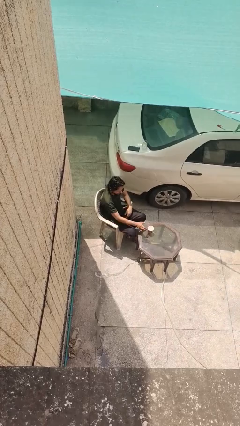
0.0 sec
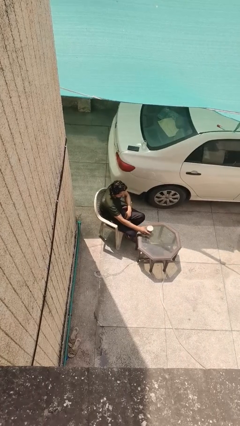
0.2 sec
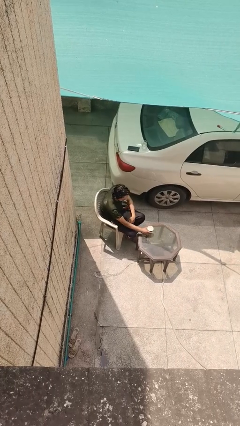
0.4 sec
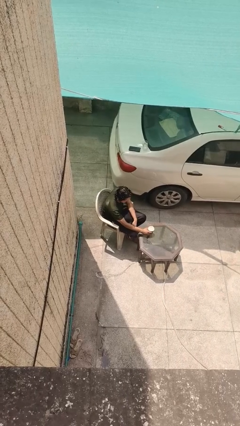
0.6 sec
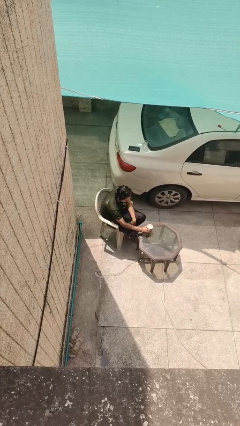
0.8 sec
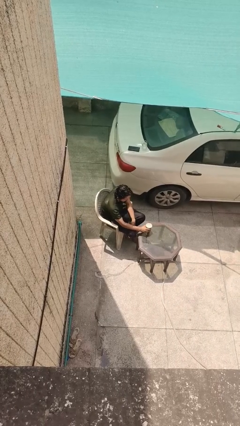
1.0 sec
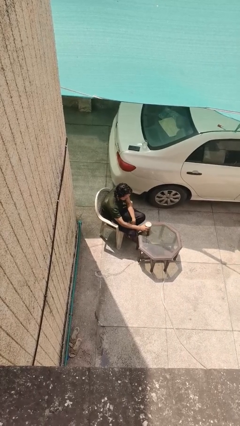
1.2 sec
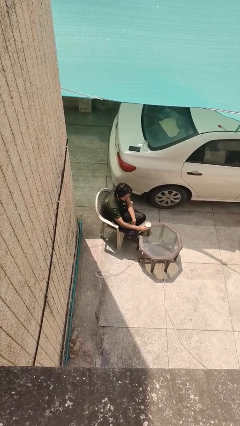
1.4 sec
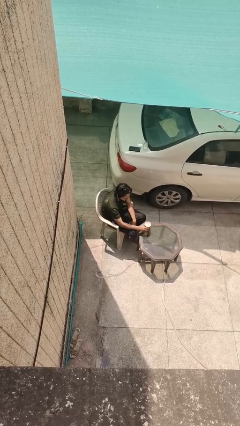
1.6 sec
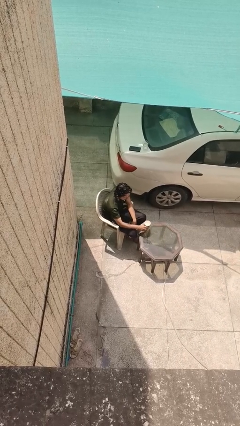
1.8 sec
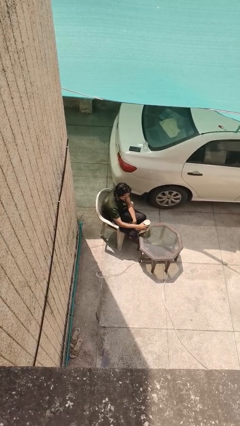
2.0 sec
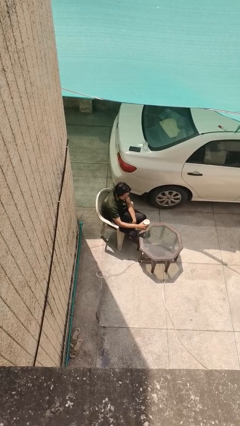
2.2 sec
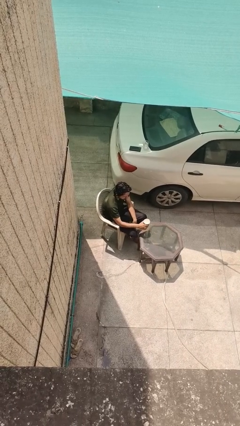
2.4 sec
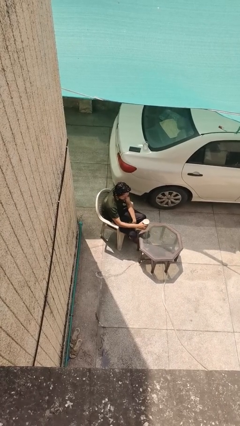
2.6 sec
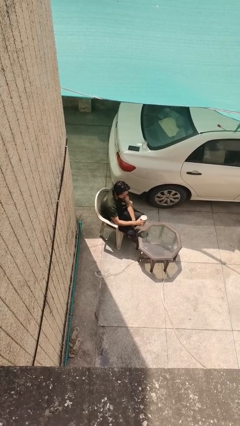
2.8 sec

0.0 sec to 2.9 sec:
person picks up object from table

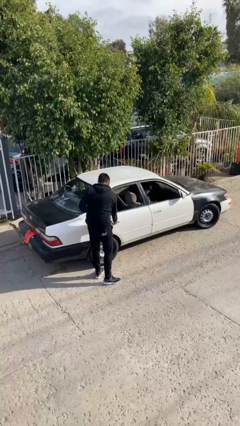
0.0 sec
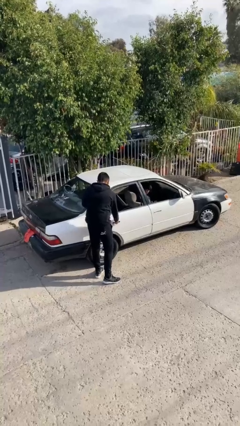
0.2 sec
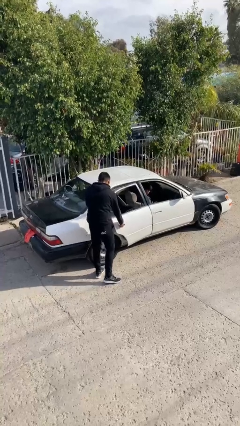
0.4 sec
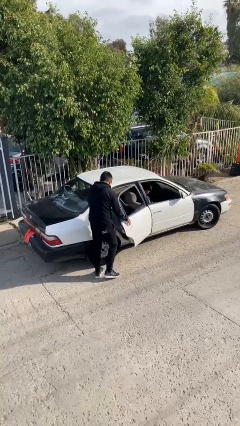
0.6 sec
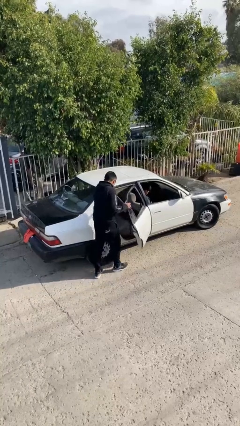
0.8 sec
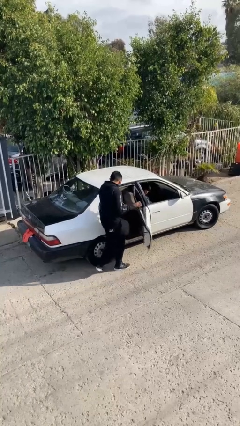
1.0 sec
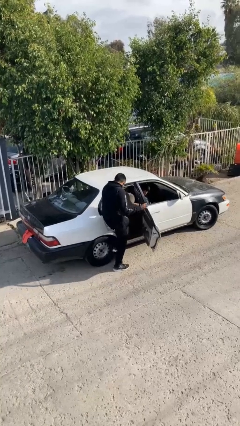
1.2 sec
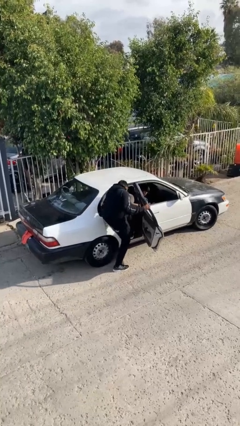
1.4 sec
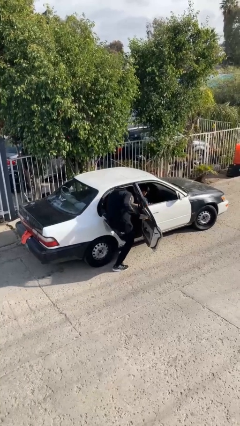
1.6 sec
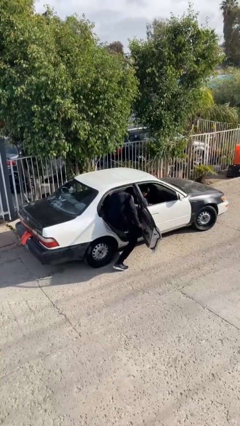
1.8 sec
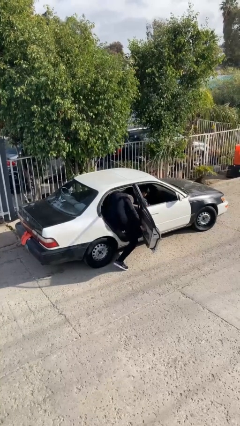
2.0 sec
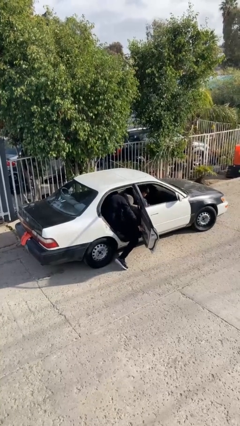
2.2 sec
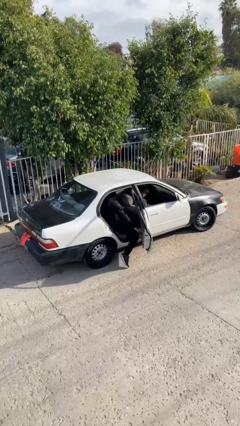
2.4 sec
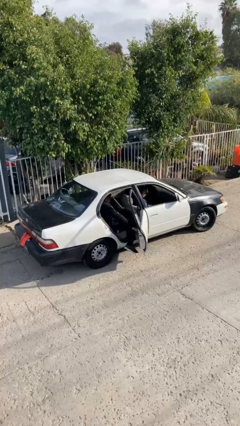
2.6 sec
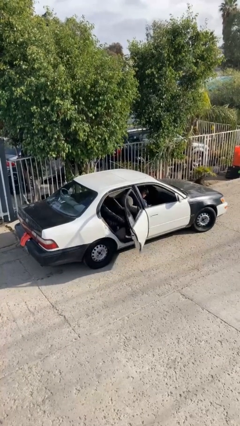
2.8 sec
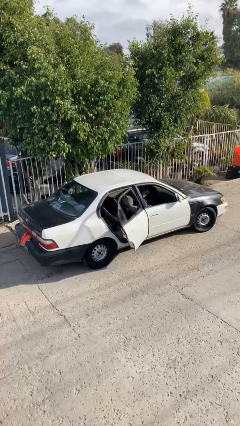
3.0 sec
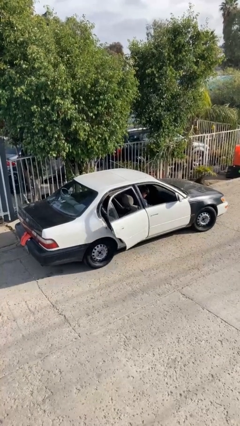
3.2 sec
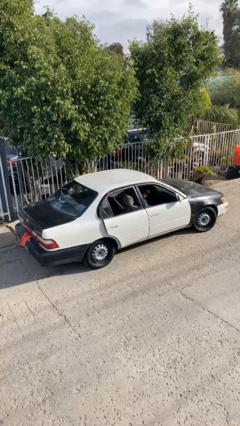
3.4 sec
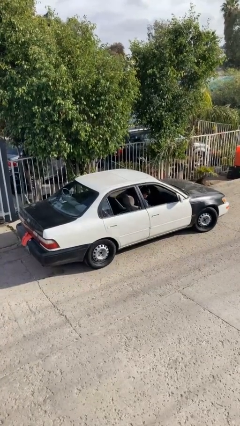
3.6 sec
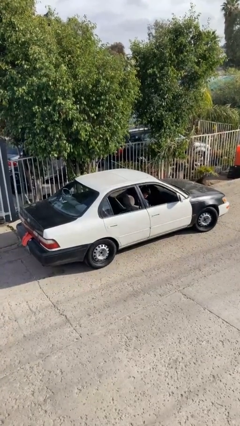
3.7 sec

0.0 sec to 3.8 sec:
car picks up person

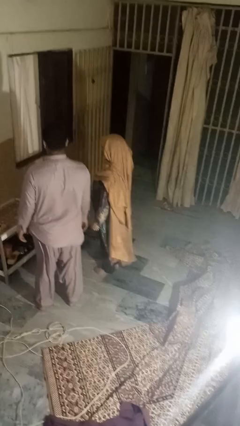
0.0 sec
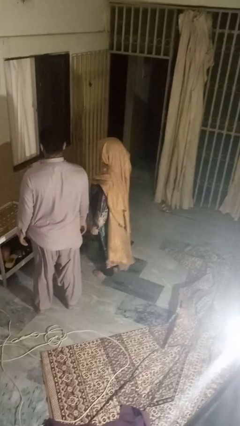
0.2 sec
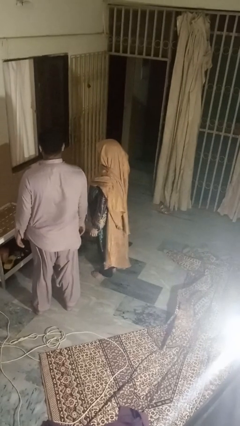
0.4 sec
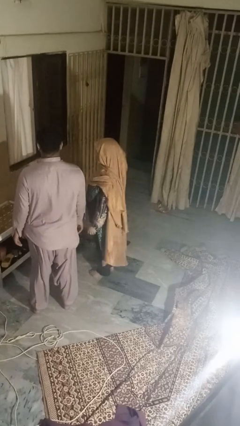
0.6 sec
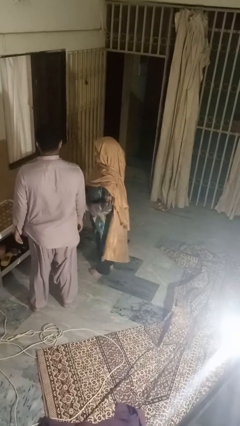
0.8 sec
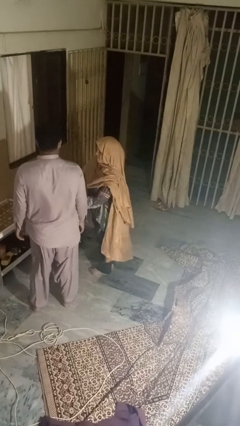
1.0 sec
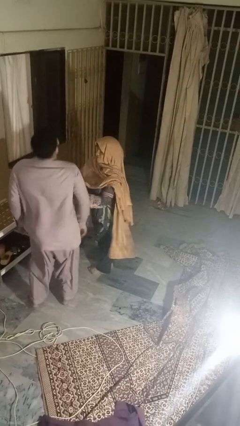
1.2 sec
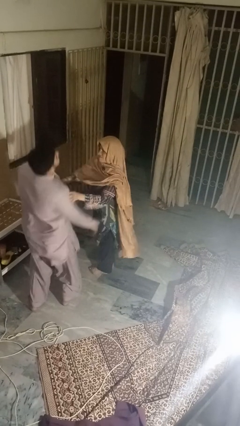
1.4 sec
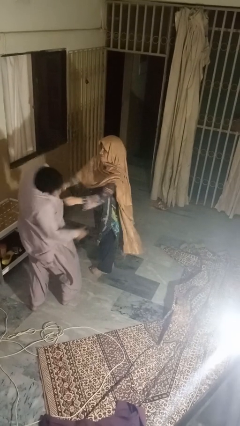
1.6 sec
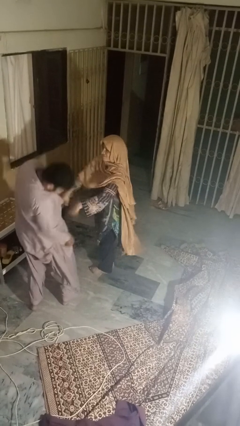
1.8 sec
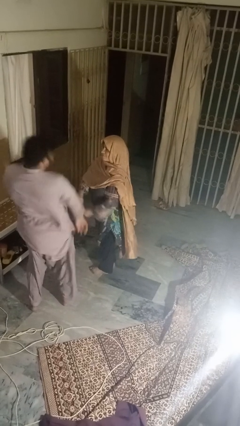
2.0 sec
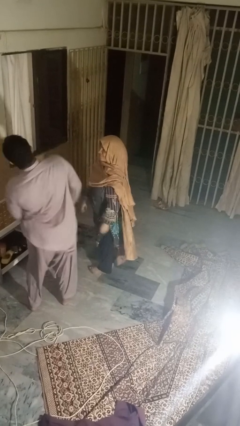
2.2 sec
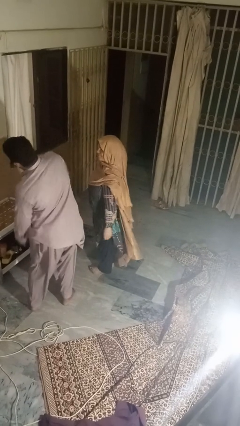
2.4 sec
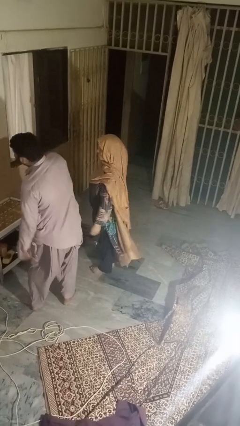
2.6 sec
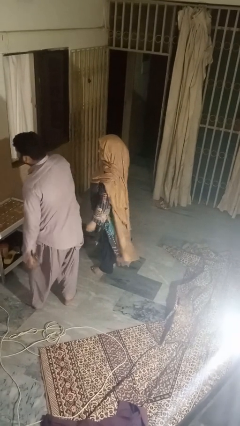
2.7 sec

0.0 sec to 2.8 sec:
person tickles person

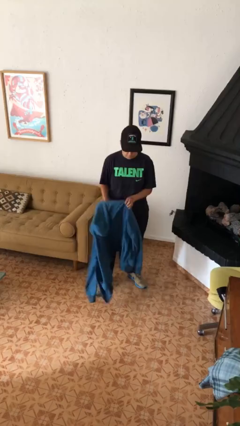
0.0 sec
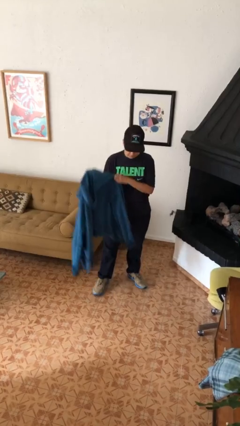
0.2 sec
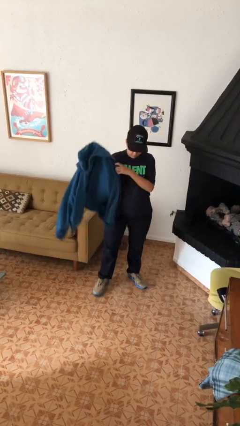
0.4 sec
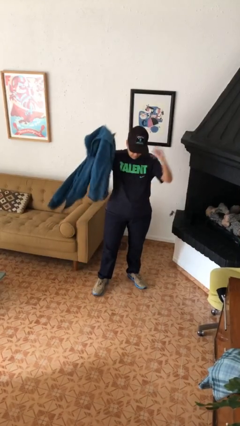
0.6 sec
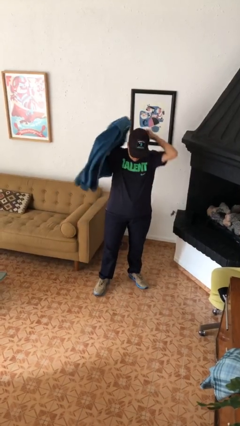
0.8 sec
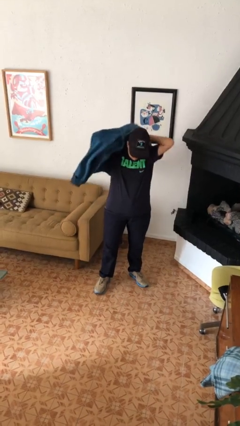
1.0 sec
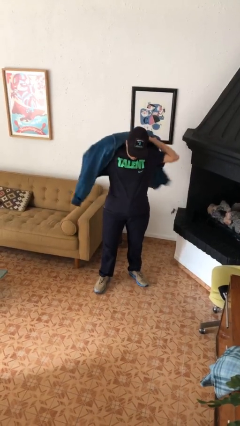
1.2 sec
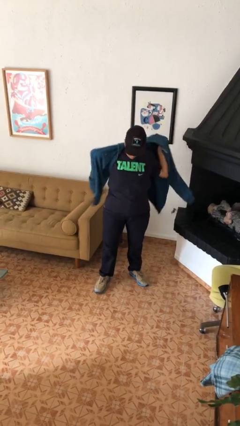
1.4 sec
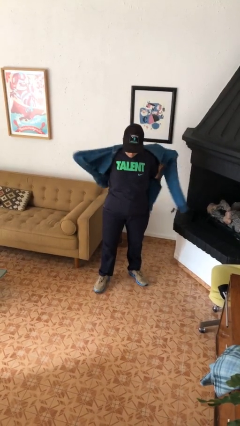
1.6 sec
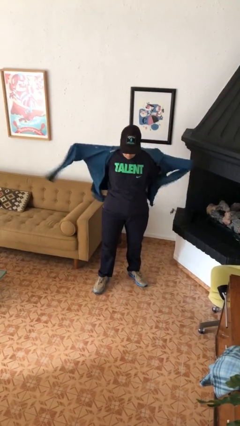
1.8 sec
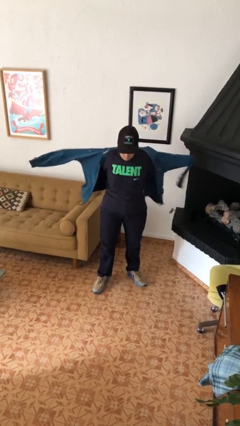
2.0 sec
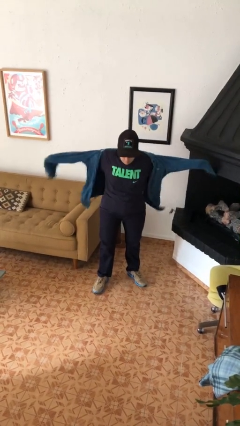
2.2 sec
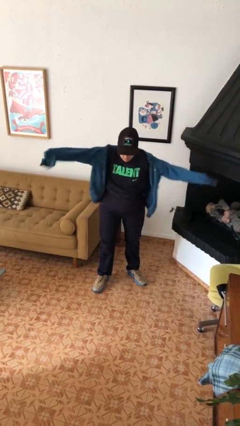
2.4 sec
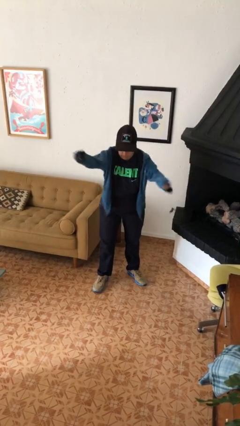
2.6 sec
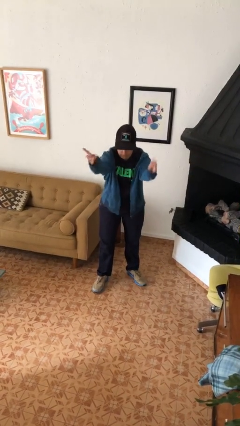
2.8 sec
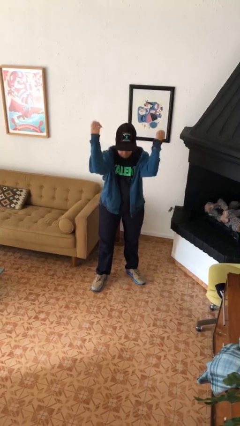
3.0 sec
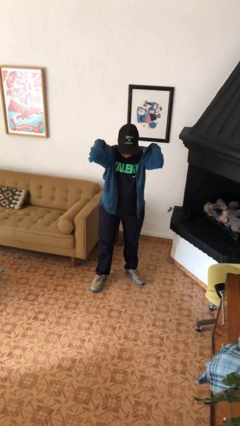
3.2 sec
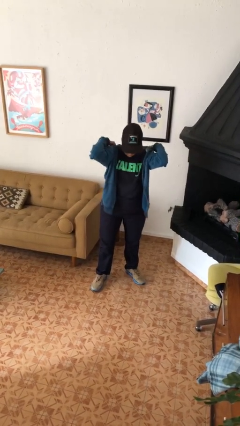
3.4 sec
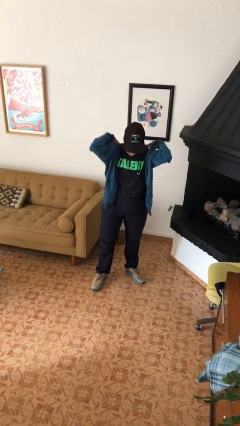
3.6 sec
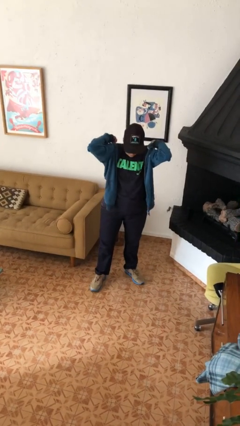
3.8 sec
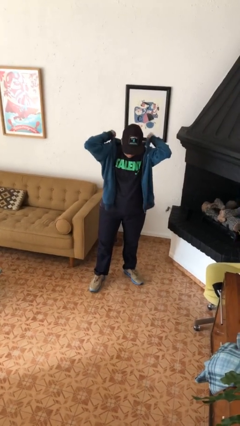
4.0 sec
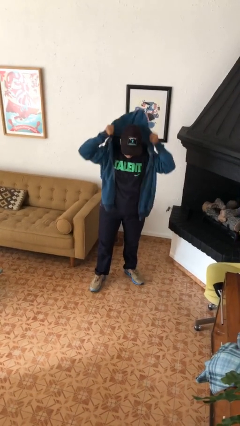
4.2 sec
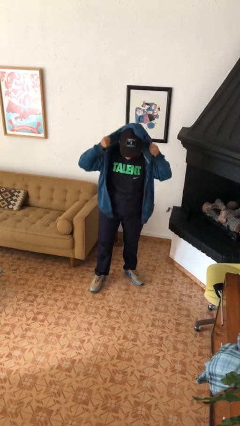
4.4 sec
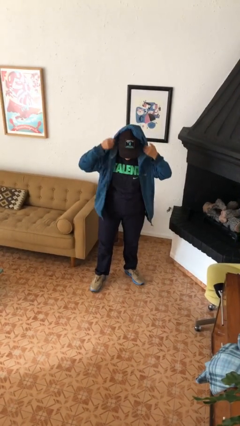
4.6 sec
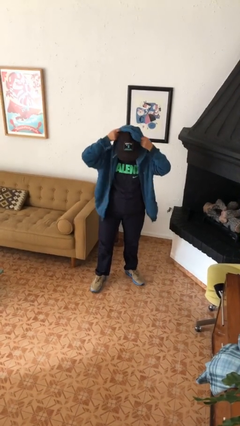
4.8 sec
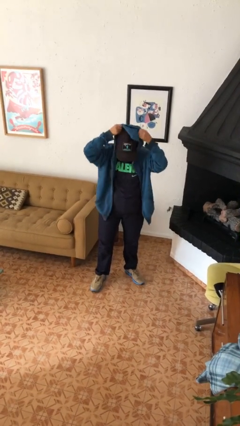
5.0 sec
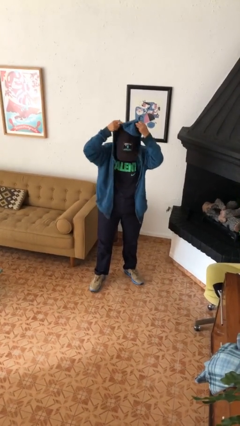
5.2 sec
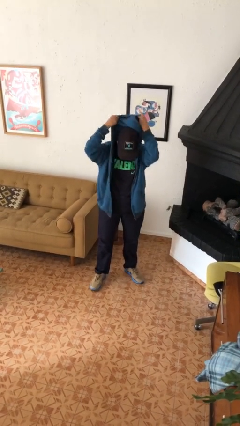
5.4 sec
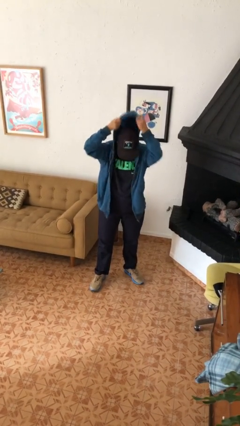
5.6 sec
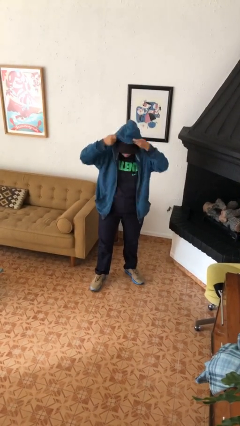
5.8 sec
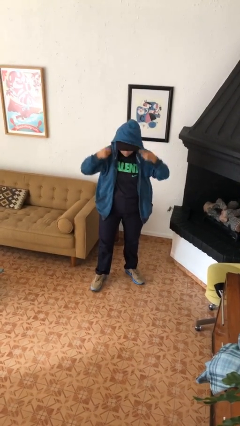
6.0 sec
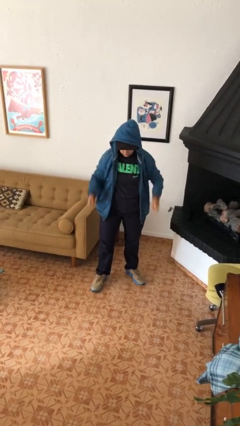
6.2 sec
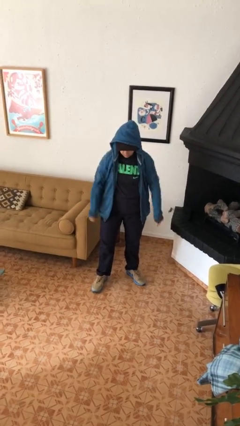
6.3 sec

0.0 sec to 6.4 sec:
person puts on hoodie

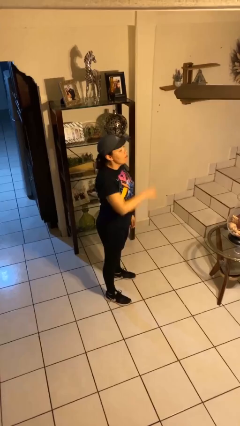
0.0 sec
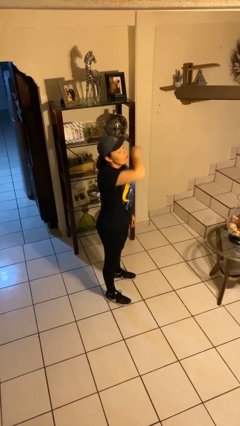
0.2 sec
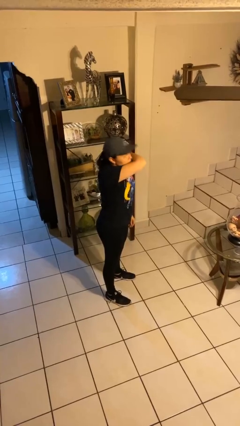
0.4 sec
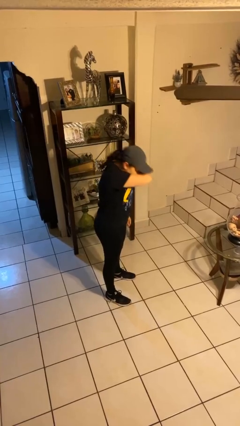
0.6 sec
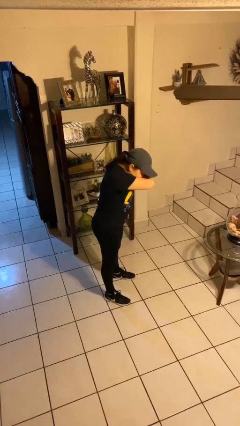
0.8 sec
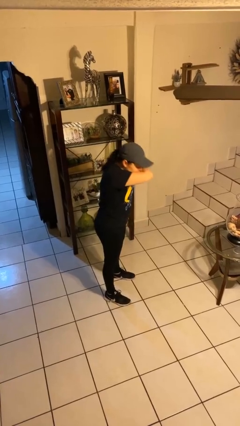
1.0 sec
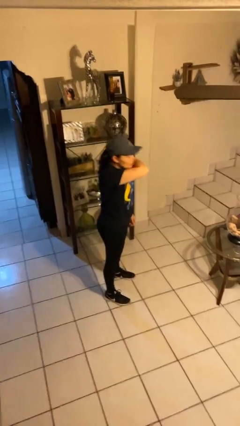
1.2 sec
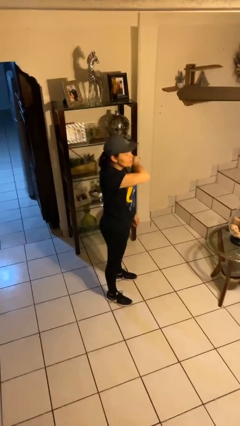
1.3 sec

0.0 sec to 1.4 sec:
person sneezes into arm

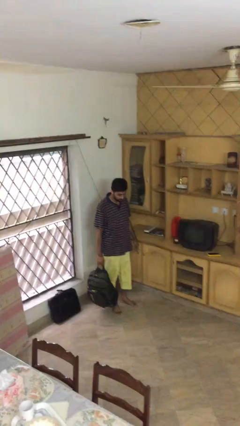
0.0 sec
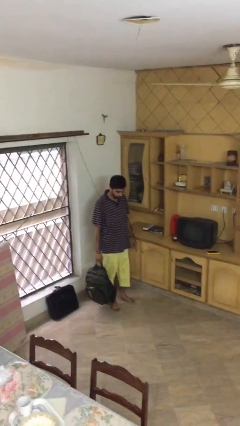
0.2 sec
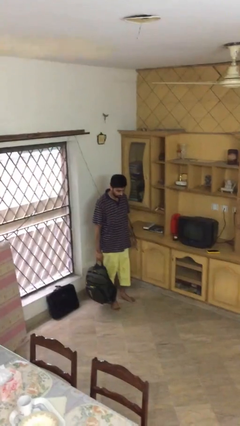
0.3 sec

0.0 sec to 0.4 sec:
person puts down object on floor
